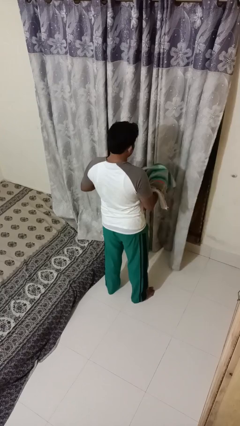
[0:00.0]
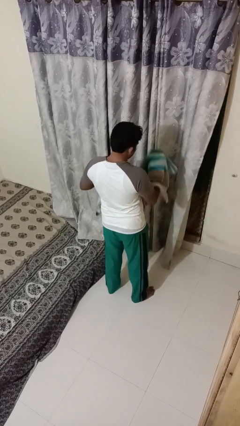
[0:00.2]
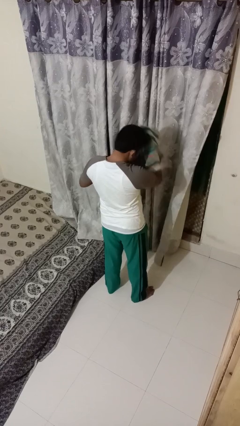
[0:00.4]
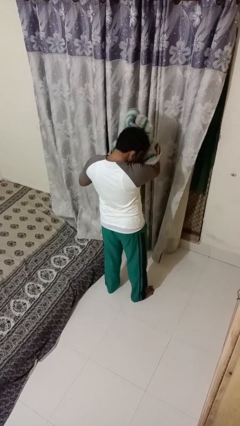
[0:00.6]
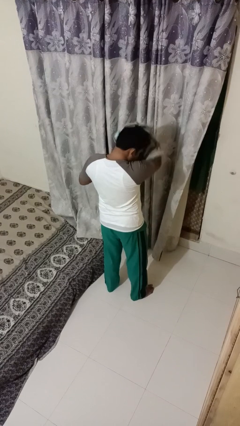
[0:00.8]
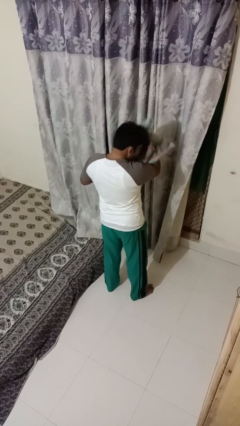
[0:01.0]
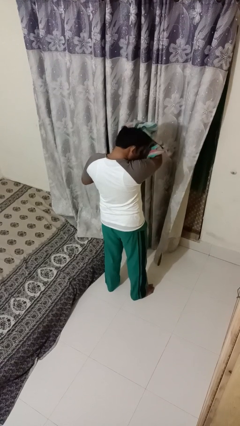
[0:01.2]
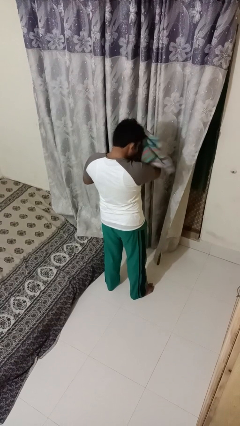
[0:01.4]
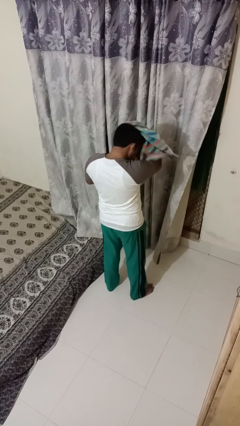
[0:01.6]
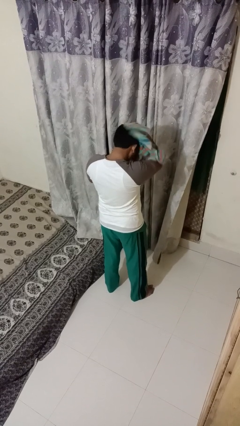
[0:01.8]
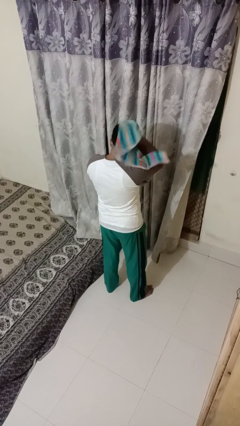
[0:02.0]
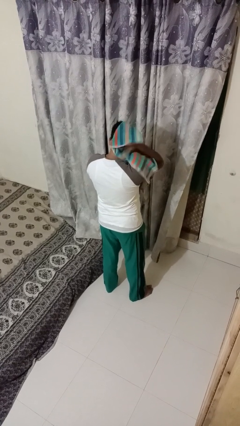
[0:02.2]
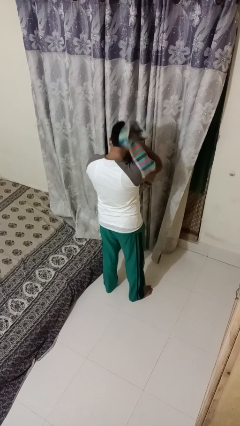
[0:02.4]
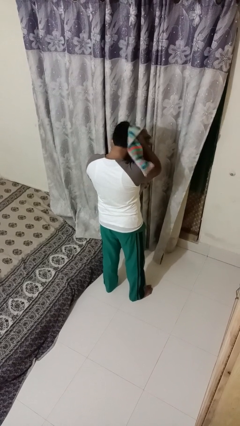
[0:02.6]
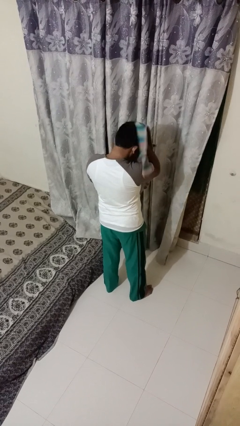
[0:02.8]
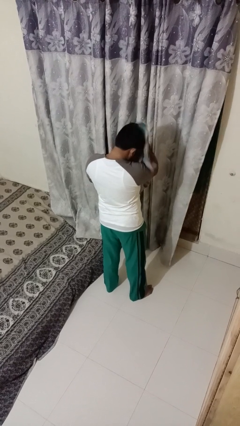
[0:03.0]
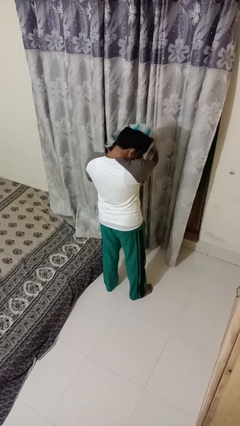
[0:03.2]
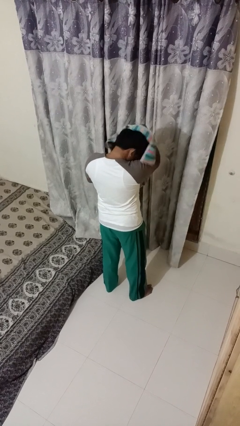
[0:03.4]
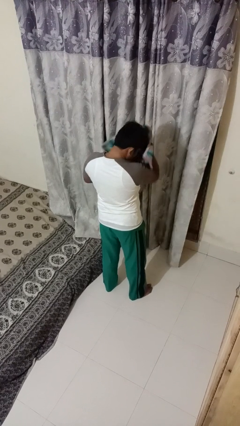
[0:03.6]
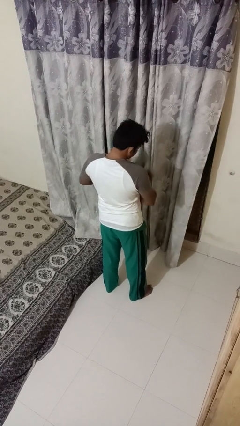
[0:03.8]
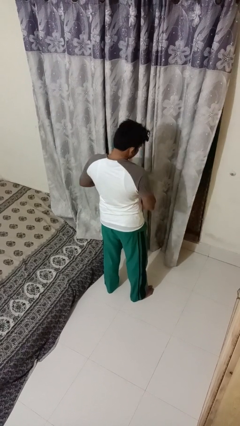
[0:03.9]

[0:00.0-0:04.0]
person dries hair with towel

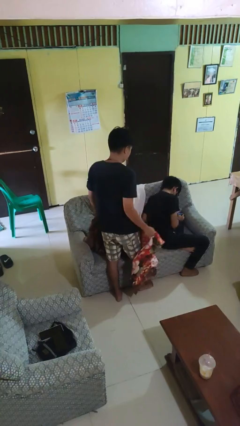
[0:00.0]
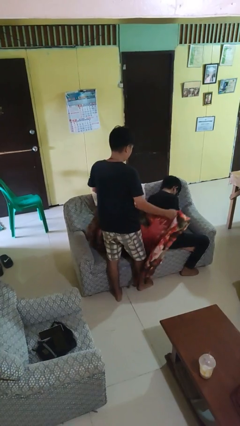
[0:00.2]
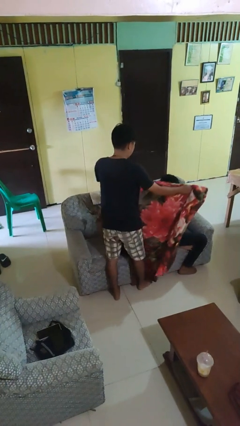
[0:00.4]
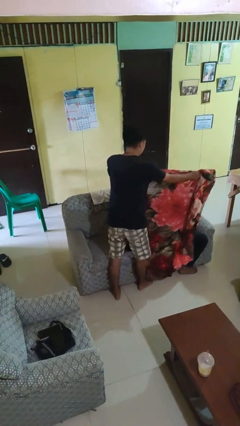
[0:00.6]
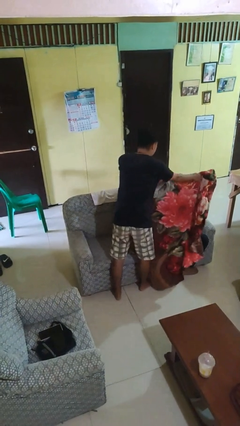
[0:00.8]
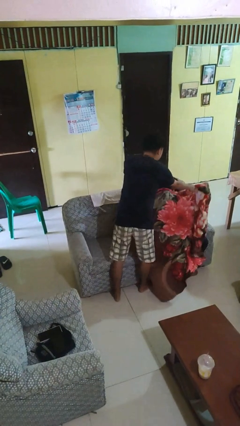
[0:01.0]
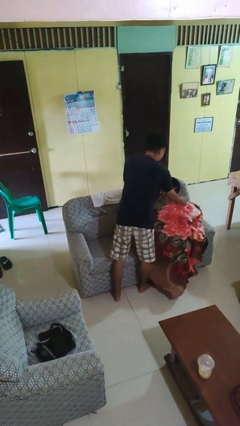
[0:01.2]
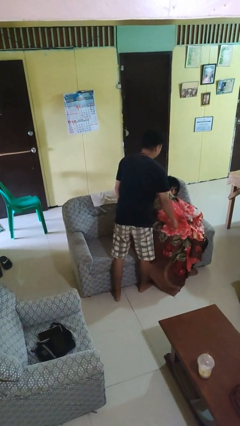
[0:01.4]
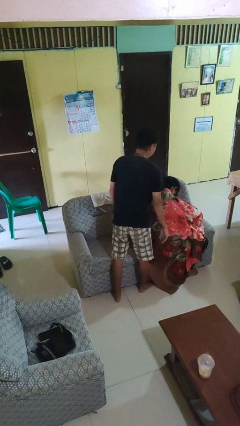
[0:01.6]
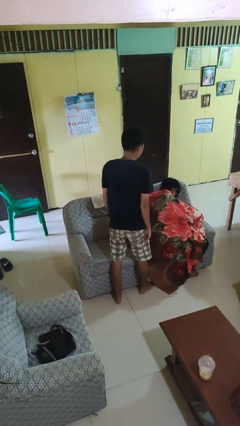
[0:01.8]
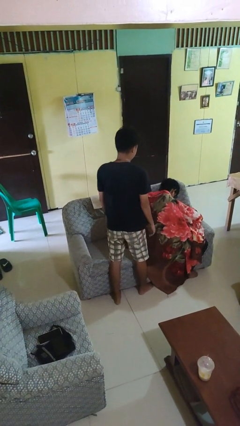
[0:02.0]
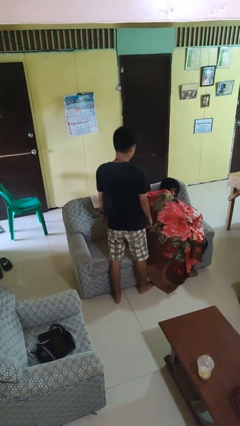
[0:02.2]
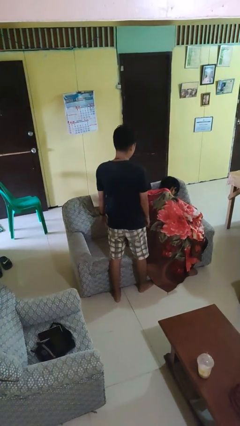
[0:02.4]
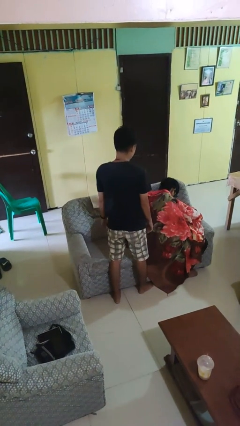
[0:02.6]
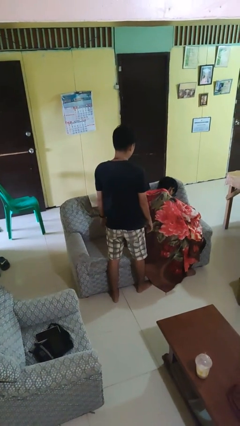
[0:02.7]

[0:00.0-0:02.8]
person covers friend with blanket

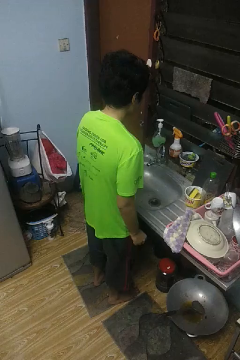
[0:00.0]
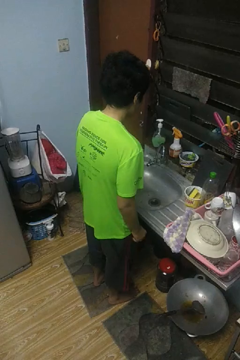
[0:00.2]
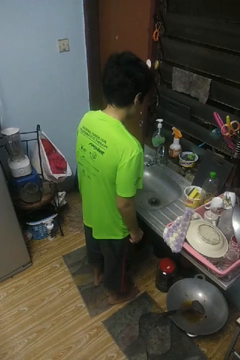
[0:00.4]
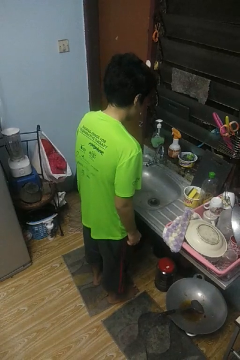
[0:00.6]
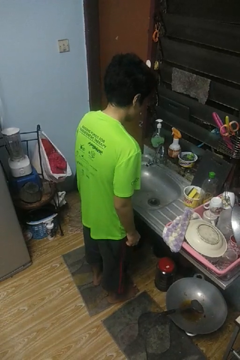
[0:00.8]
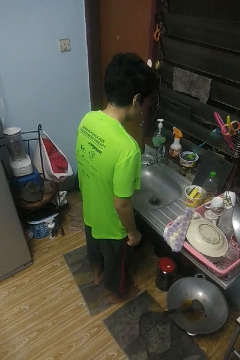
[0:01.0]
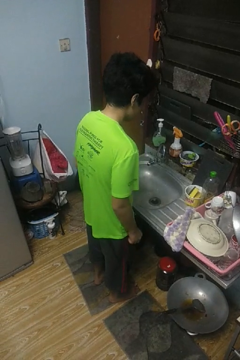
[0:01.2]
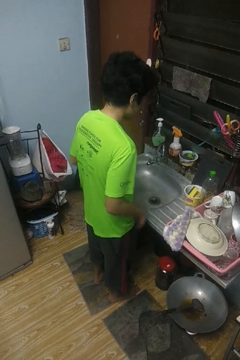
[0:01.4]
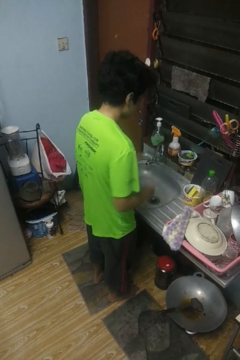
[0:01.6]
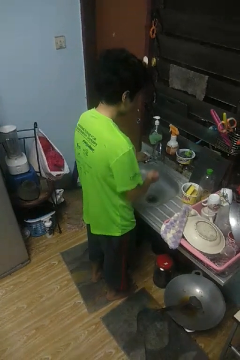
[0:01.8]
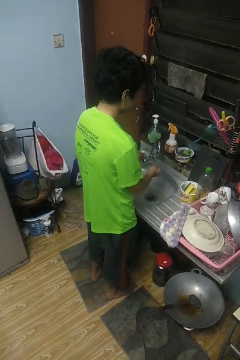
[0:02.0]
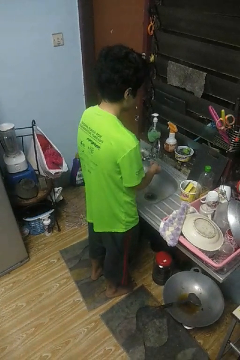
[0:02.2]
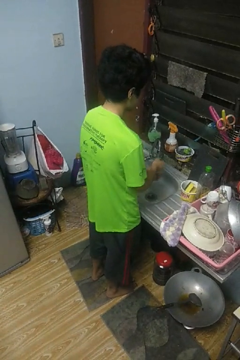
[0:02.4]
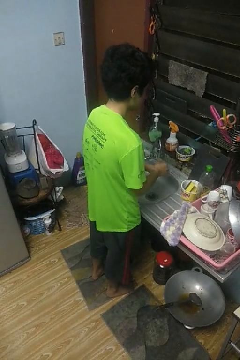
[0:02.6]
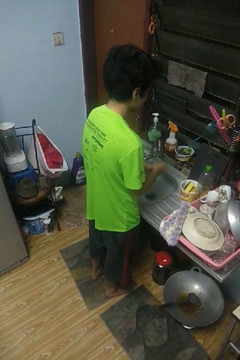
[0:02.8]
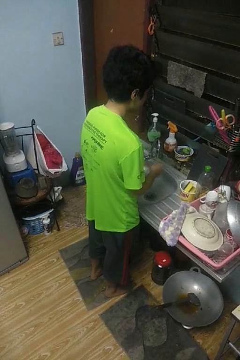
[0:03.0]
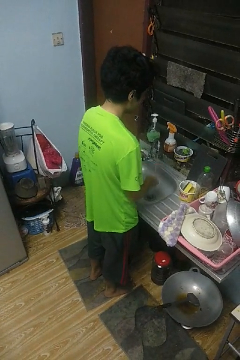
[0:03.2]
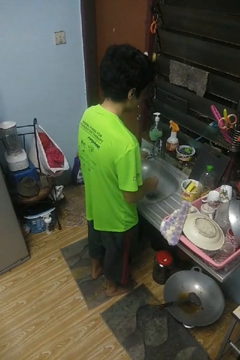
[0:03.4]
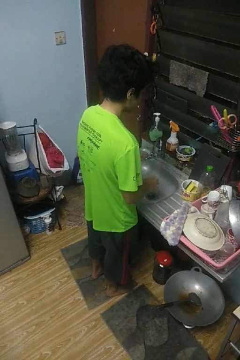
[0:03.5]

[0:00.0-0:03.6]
person washes hands

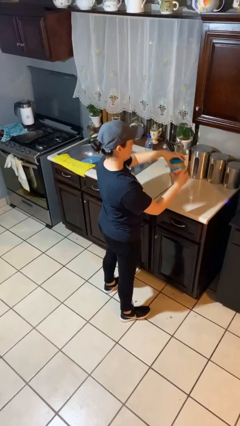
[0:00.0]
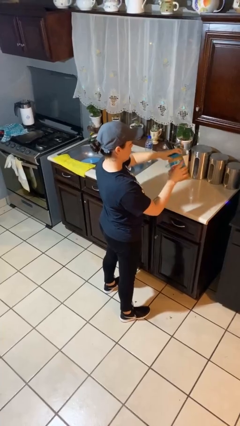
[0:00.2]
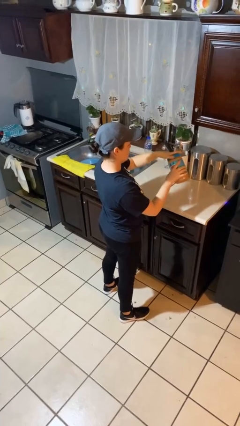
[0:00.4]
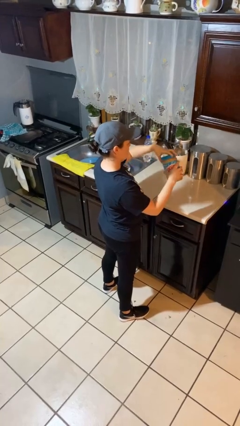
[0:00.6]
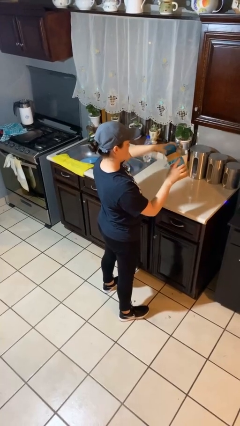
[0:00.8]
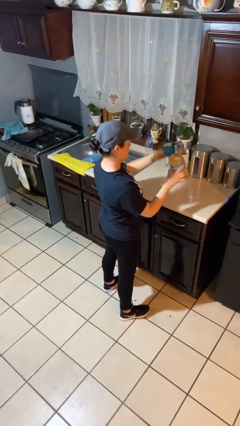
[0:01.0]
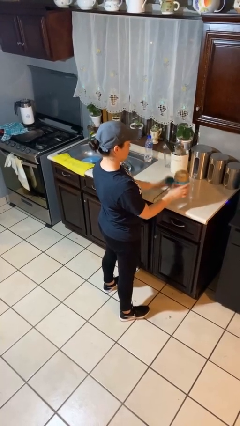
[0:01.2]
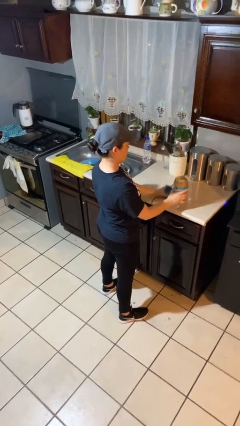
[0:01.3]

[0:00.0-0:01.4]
person opens jar

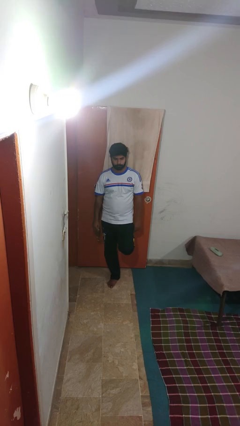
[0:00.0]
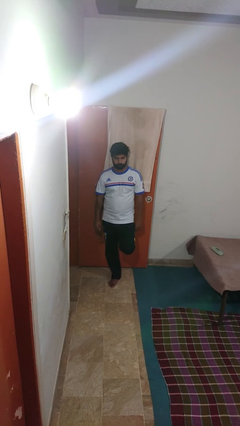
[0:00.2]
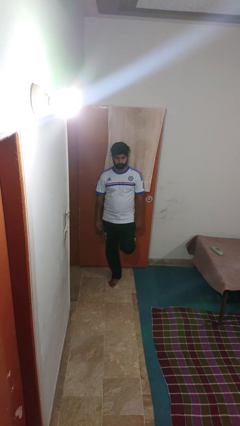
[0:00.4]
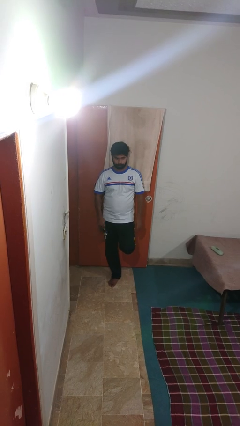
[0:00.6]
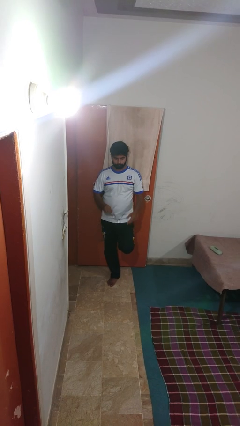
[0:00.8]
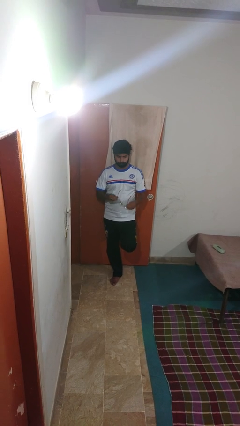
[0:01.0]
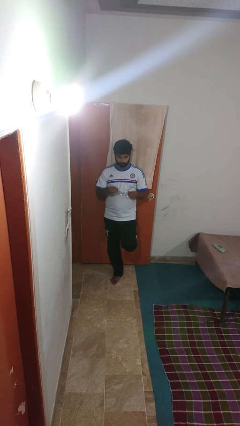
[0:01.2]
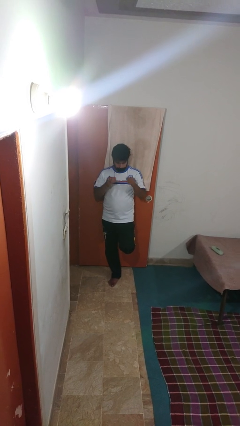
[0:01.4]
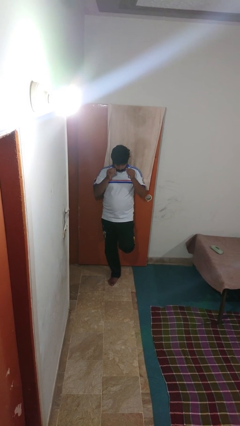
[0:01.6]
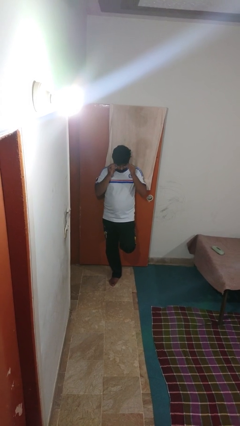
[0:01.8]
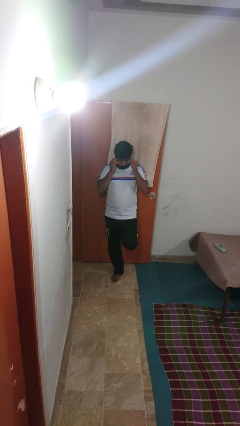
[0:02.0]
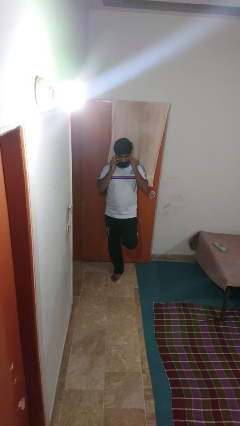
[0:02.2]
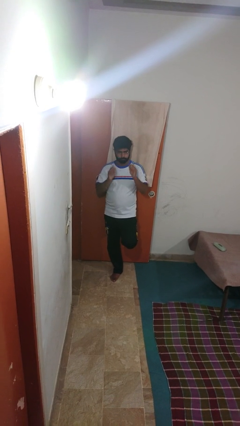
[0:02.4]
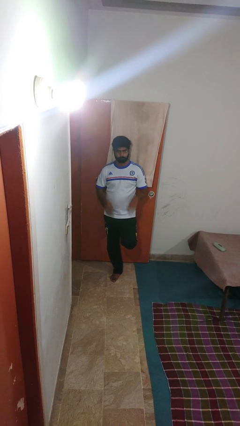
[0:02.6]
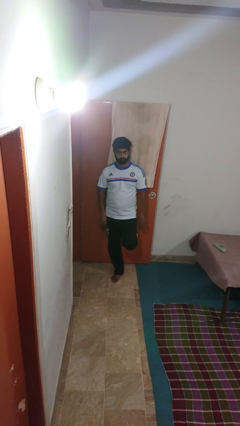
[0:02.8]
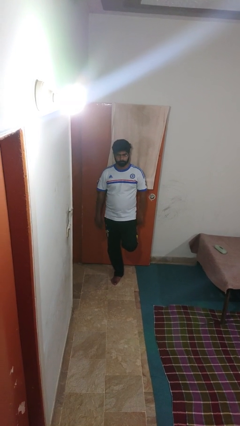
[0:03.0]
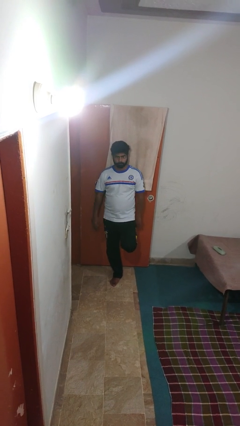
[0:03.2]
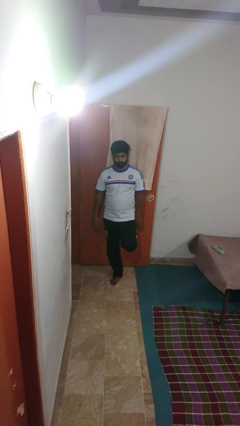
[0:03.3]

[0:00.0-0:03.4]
person puts on glasses

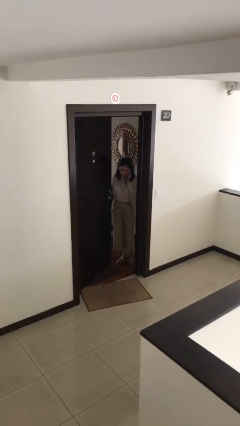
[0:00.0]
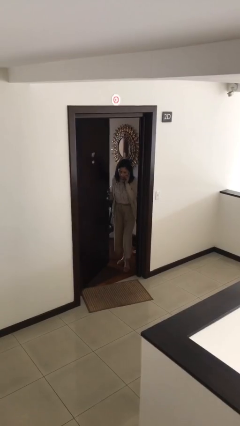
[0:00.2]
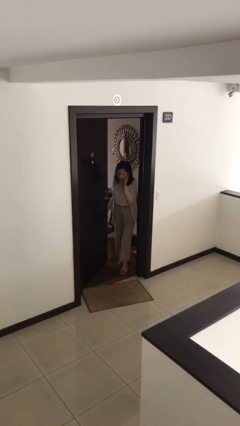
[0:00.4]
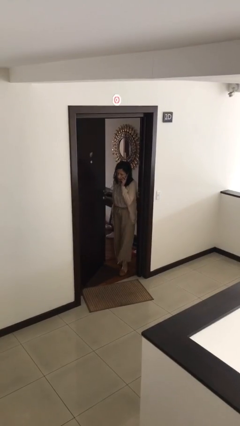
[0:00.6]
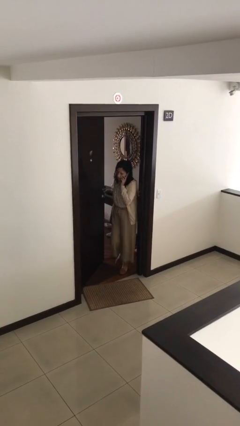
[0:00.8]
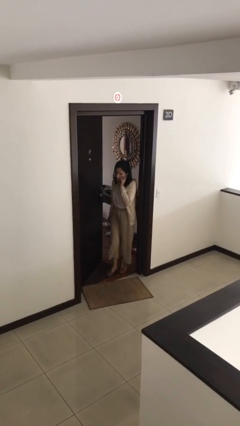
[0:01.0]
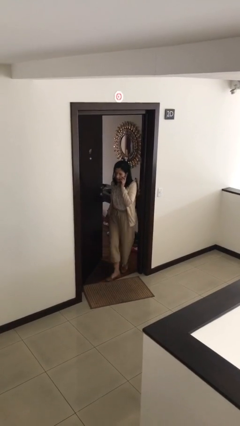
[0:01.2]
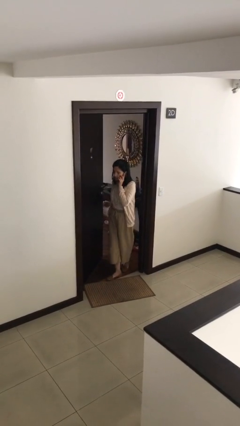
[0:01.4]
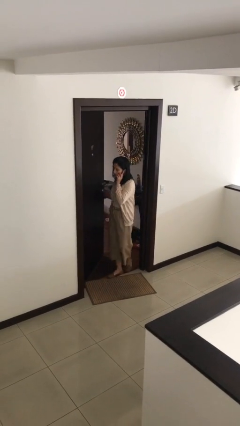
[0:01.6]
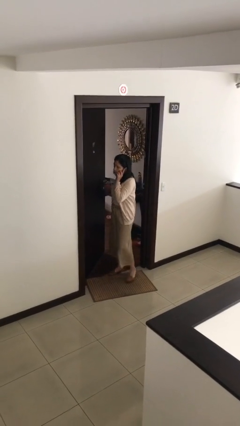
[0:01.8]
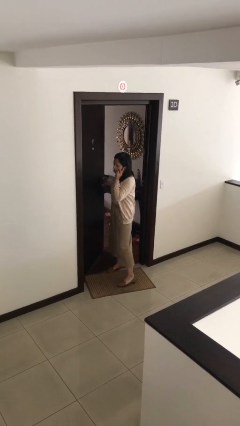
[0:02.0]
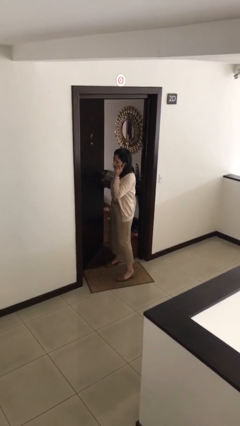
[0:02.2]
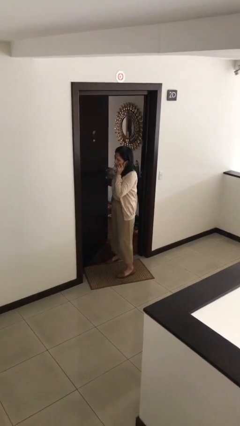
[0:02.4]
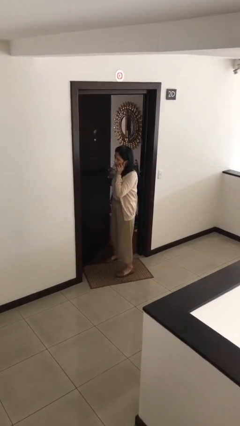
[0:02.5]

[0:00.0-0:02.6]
person enters scene through structure
